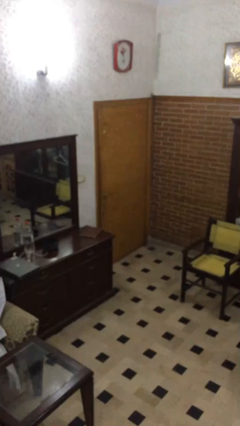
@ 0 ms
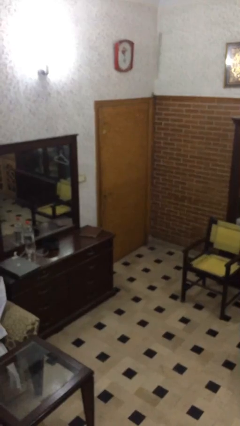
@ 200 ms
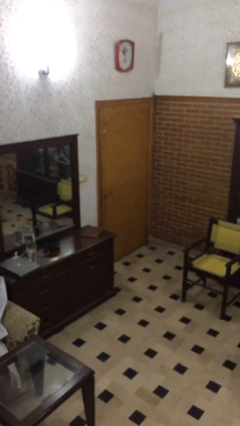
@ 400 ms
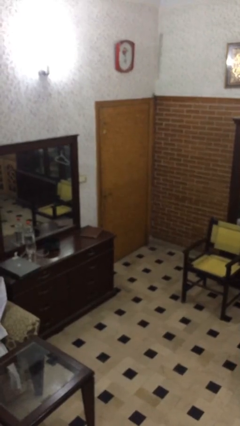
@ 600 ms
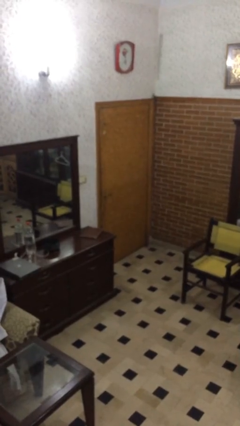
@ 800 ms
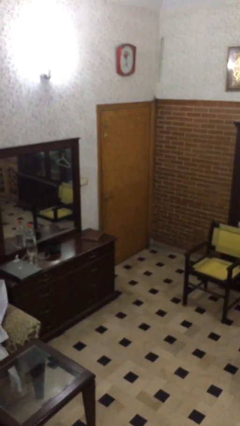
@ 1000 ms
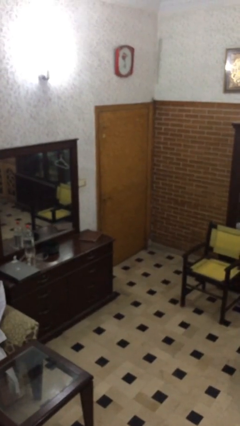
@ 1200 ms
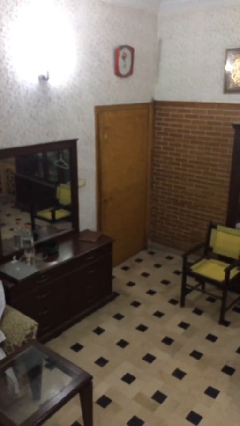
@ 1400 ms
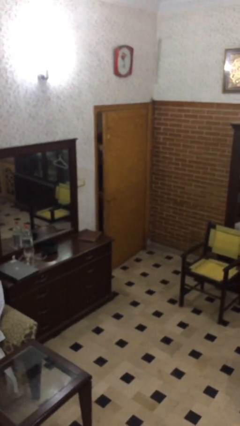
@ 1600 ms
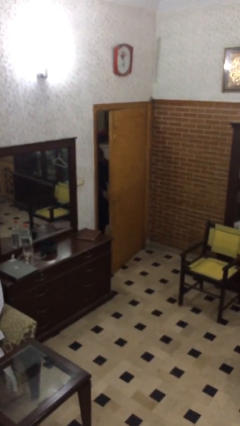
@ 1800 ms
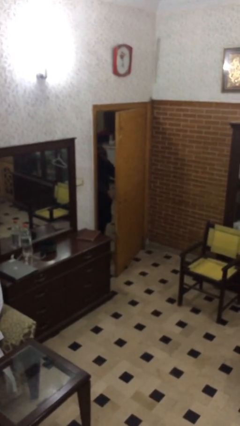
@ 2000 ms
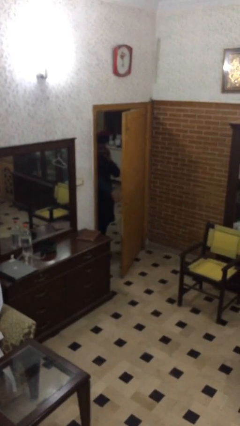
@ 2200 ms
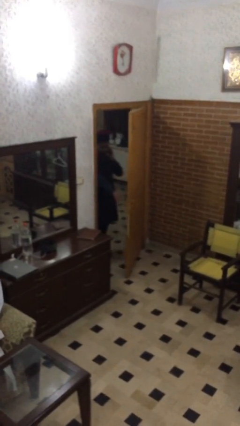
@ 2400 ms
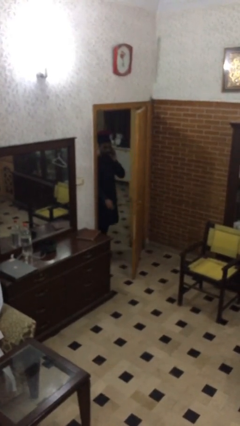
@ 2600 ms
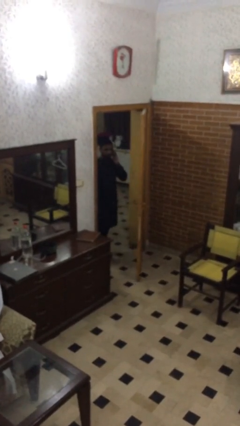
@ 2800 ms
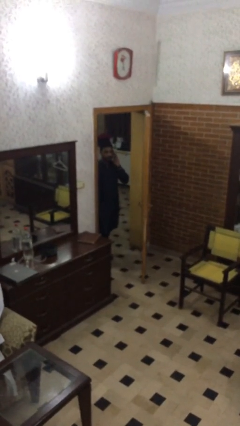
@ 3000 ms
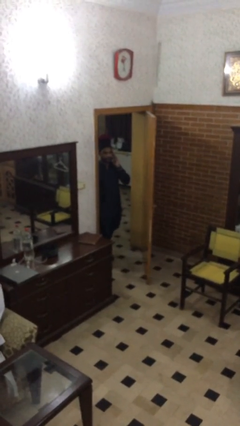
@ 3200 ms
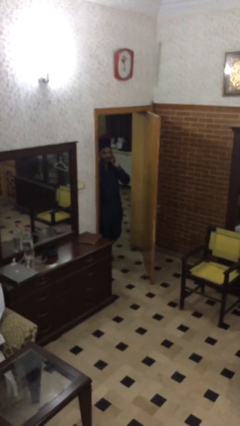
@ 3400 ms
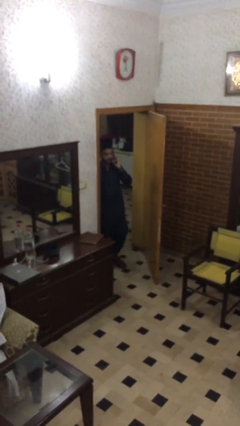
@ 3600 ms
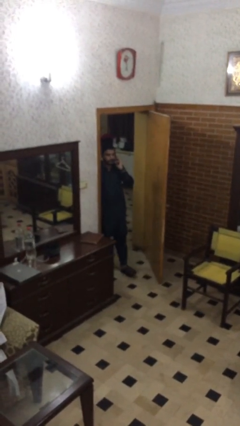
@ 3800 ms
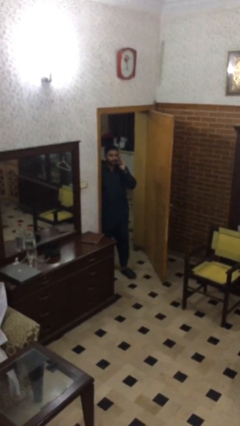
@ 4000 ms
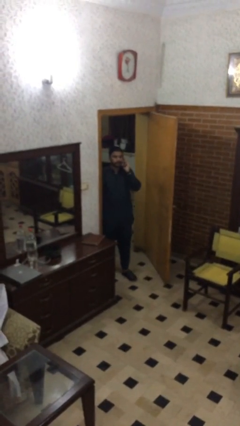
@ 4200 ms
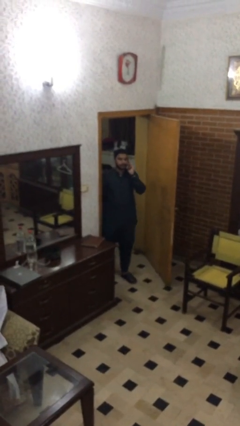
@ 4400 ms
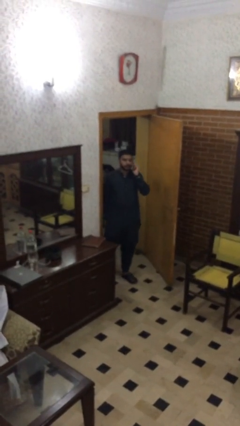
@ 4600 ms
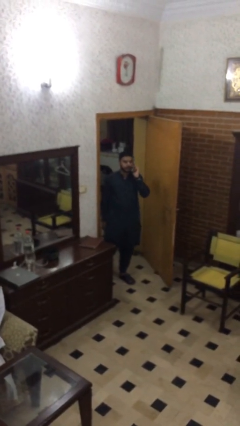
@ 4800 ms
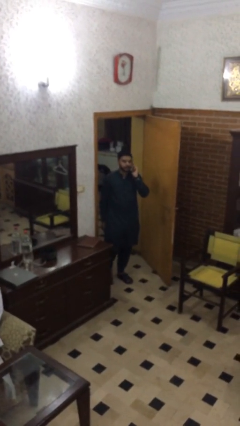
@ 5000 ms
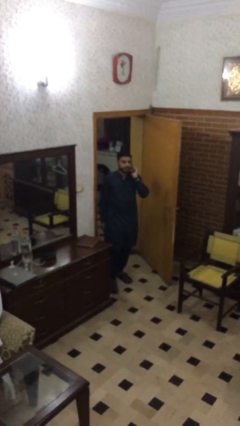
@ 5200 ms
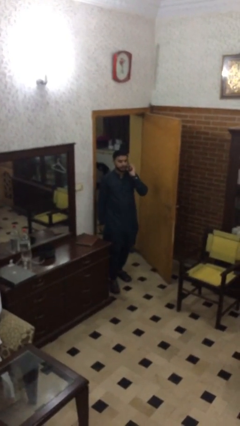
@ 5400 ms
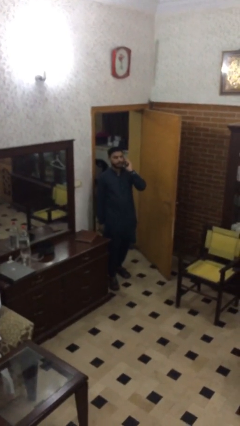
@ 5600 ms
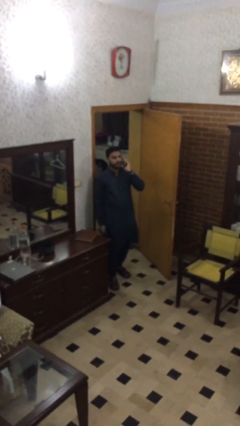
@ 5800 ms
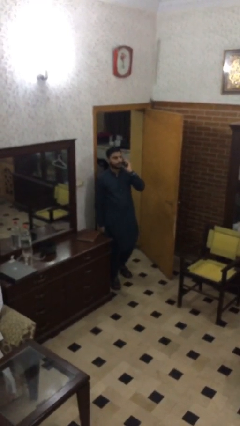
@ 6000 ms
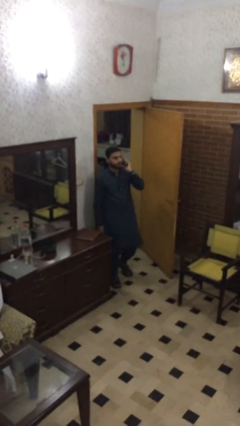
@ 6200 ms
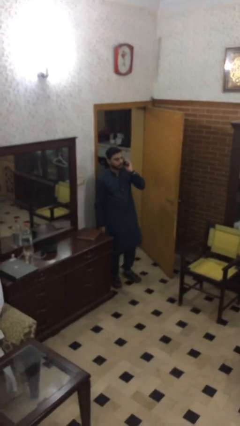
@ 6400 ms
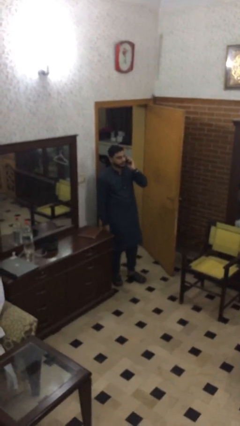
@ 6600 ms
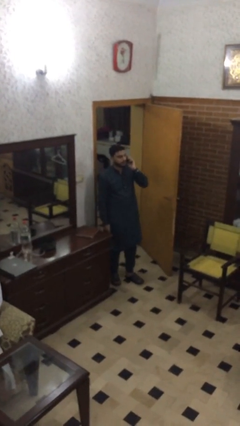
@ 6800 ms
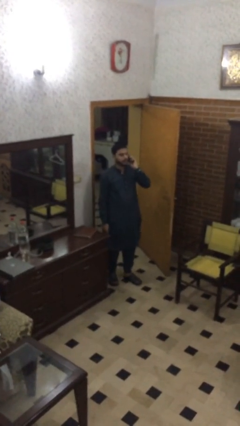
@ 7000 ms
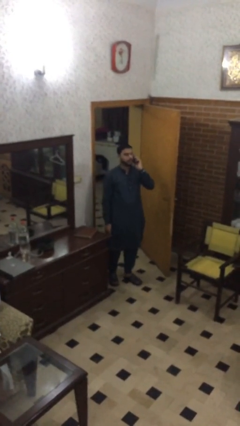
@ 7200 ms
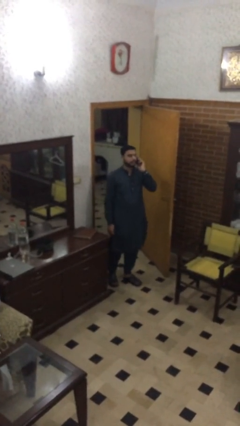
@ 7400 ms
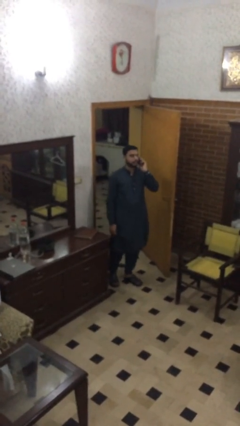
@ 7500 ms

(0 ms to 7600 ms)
person enters scene through structure

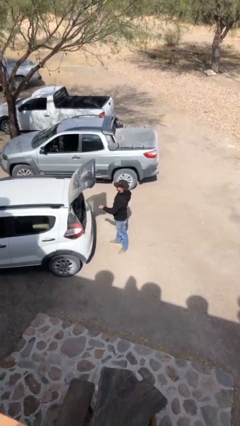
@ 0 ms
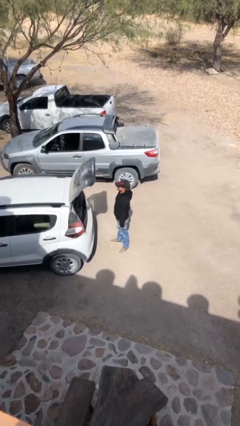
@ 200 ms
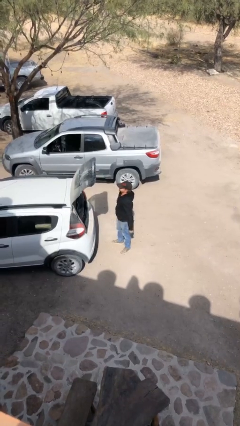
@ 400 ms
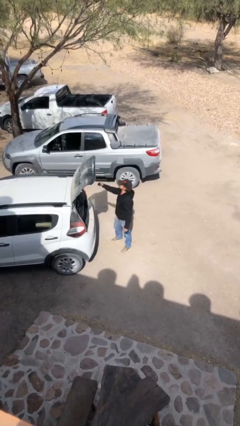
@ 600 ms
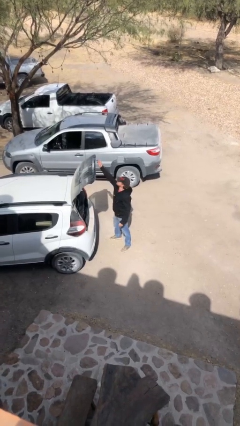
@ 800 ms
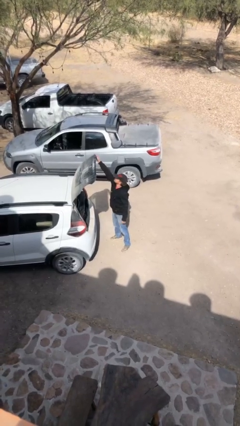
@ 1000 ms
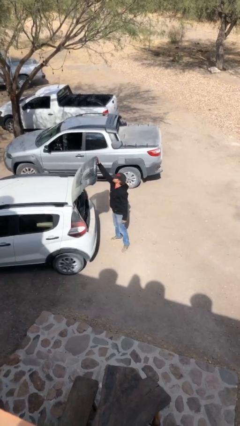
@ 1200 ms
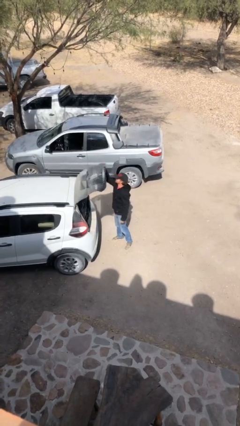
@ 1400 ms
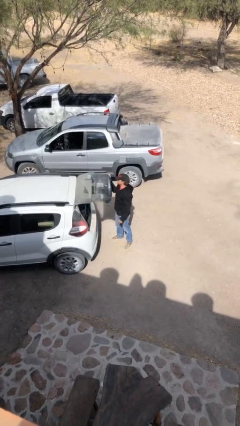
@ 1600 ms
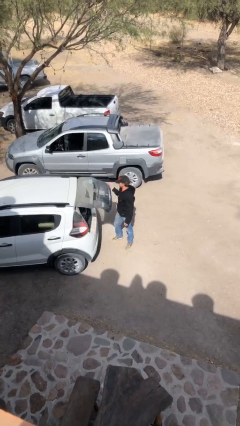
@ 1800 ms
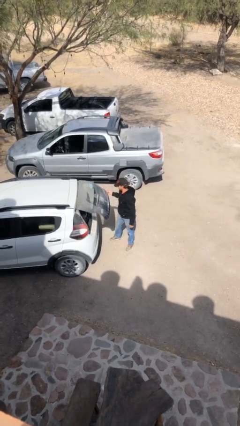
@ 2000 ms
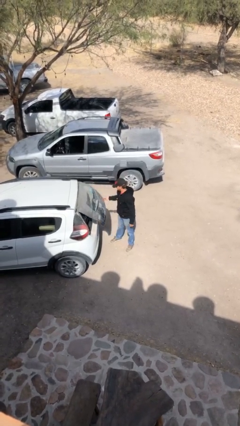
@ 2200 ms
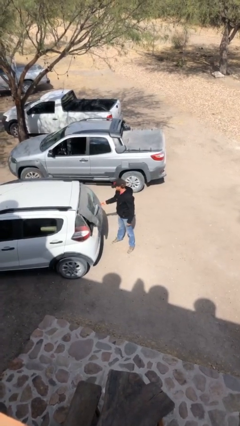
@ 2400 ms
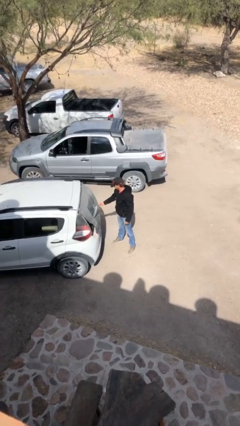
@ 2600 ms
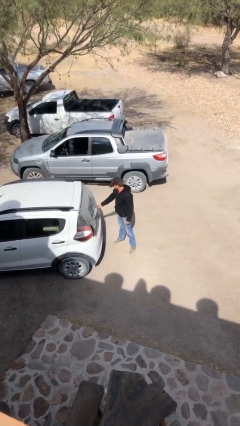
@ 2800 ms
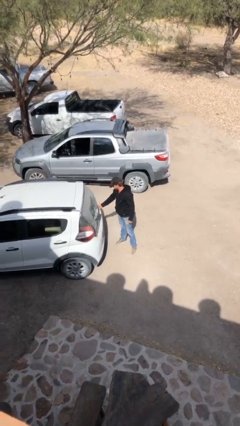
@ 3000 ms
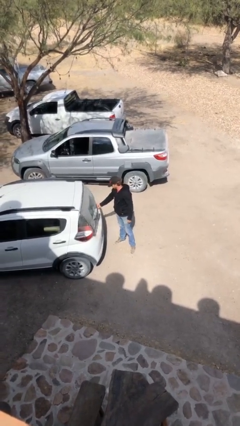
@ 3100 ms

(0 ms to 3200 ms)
person closes car trunk

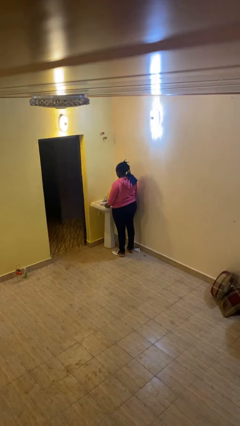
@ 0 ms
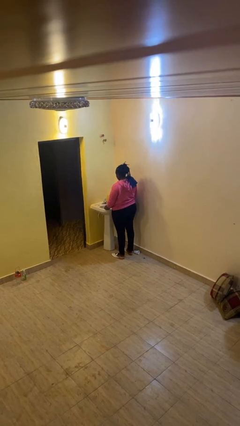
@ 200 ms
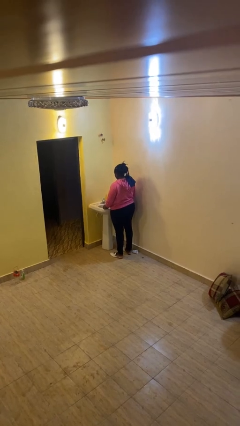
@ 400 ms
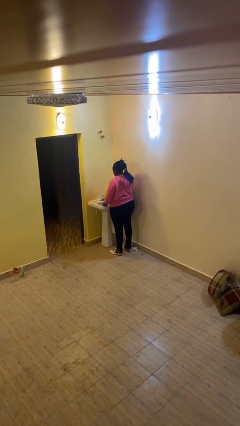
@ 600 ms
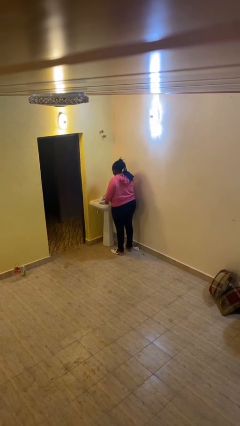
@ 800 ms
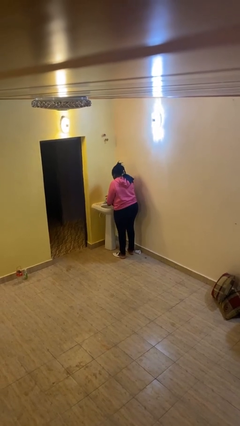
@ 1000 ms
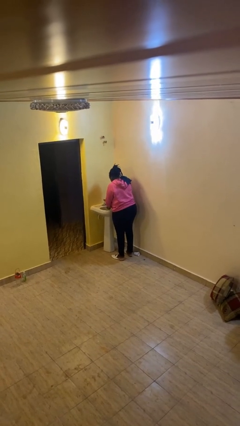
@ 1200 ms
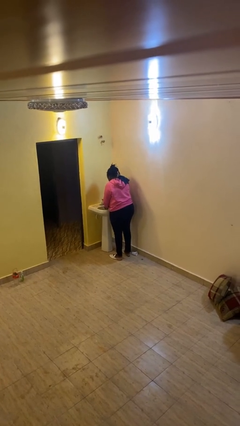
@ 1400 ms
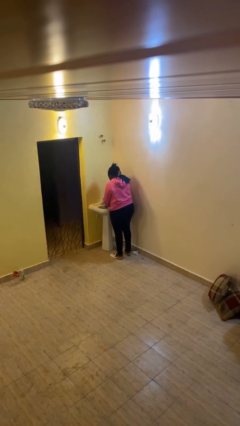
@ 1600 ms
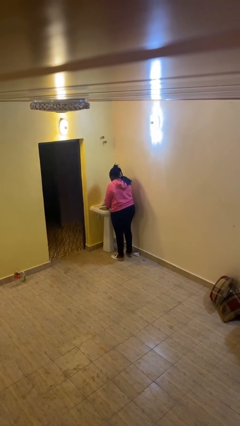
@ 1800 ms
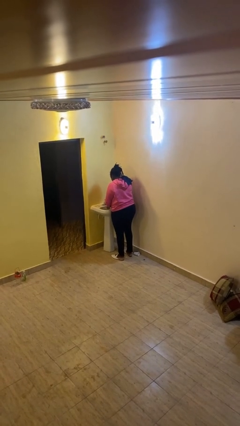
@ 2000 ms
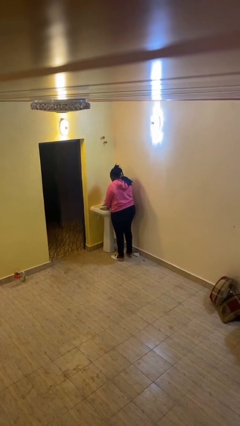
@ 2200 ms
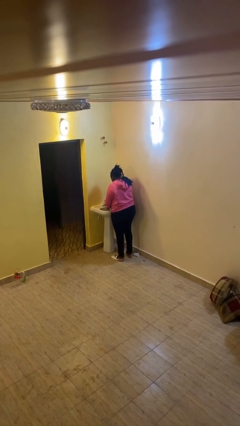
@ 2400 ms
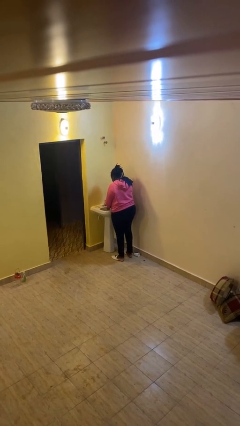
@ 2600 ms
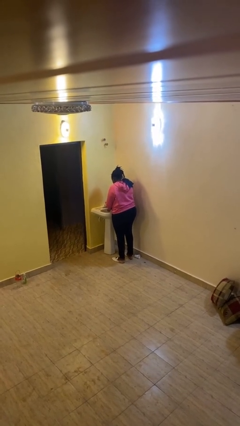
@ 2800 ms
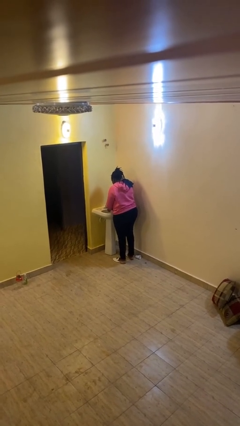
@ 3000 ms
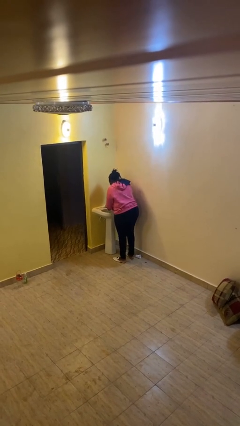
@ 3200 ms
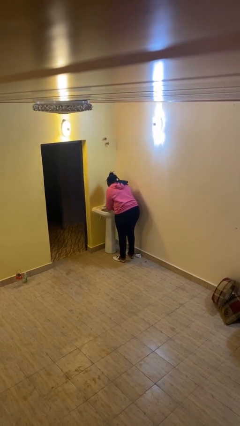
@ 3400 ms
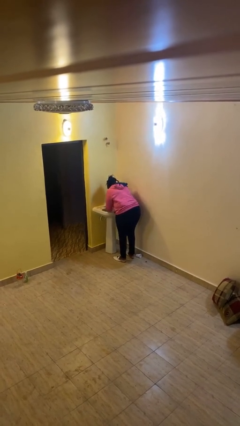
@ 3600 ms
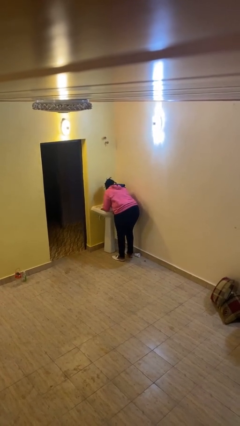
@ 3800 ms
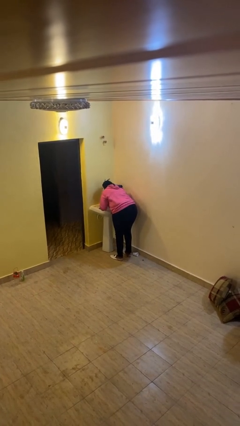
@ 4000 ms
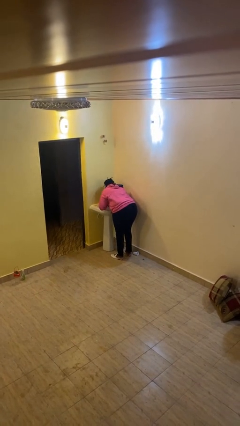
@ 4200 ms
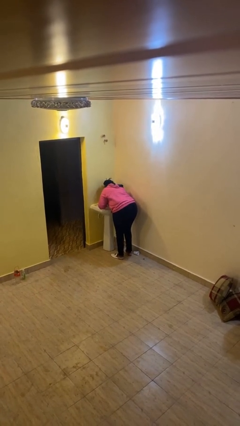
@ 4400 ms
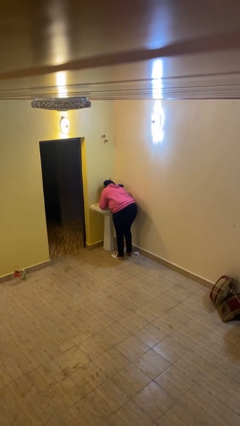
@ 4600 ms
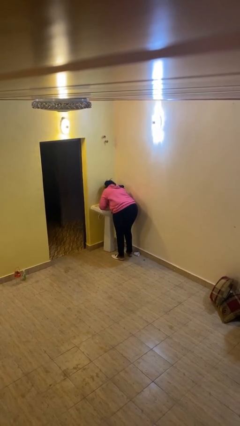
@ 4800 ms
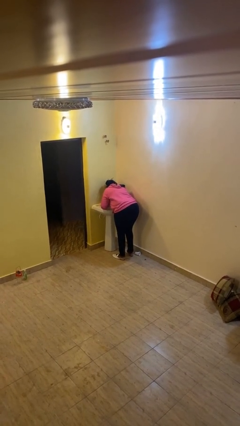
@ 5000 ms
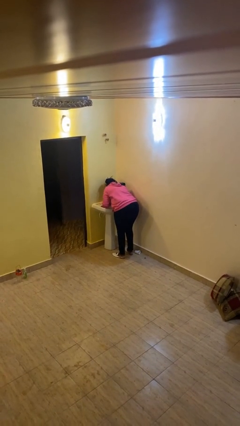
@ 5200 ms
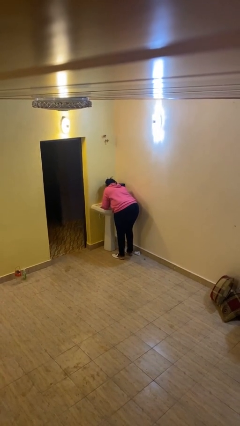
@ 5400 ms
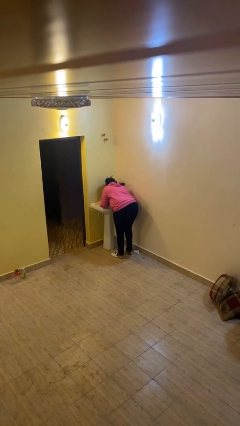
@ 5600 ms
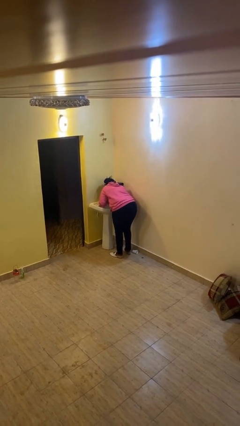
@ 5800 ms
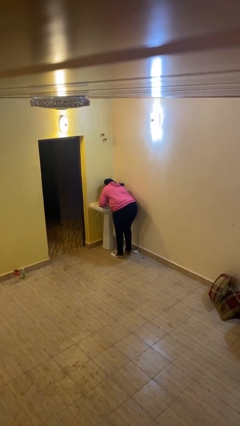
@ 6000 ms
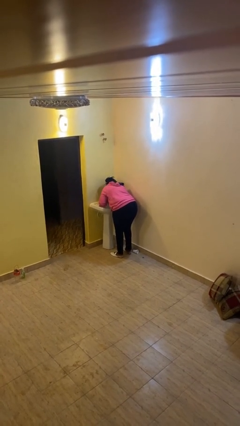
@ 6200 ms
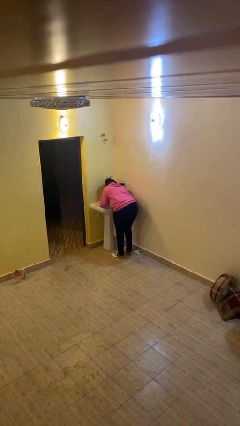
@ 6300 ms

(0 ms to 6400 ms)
person washes face

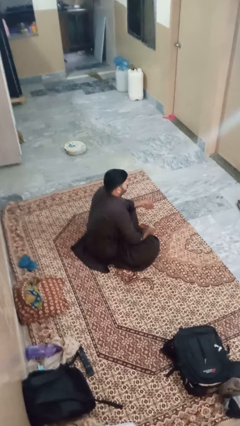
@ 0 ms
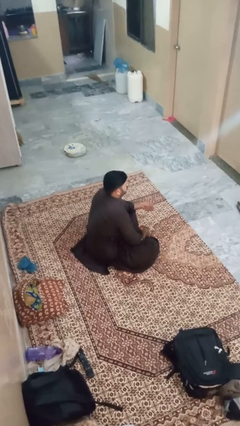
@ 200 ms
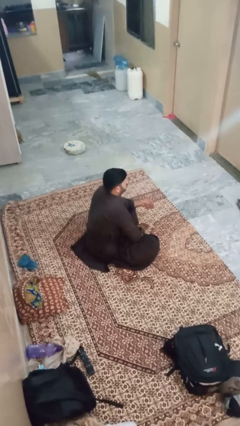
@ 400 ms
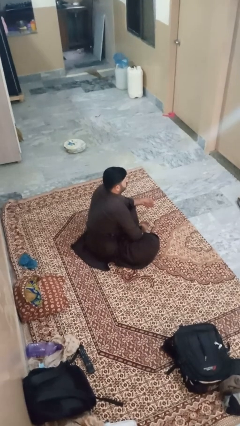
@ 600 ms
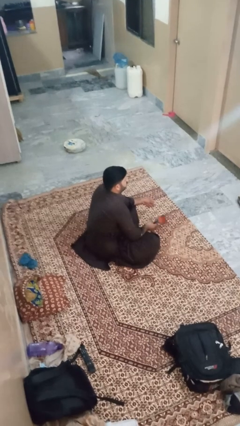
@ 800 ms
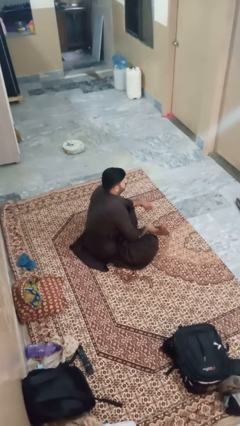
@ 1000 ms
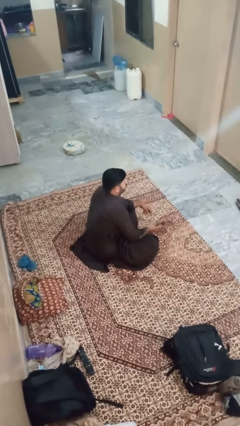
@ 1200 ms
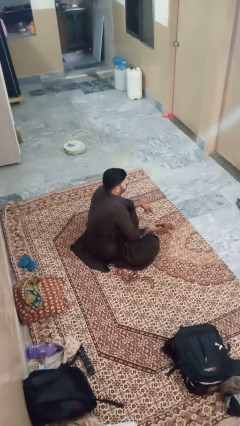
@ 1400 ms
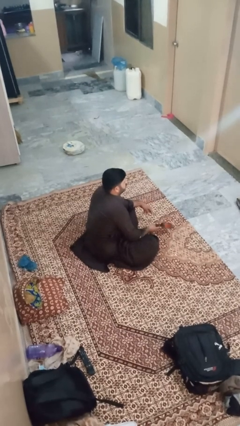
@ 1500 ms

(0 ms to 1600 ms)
person picks up object from floor
